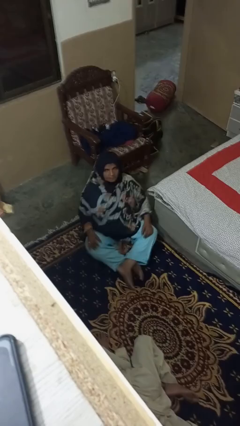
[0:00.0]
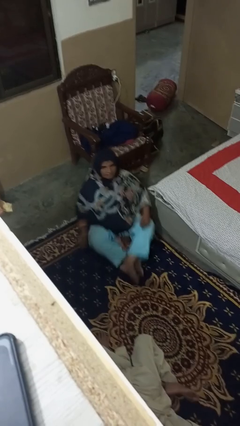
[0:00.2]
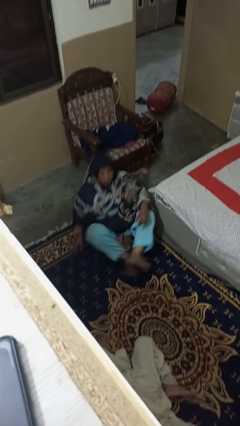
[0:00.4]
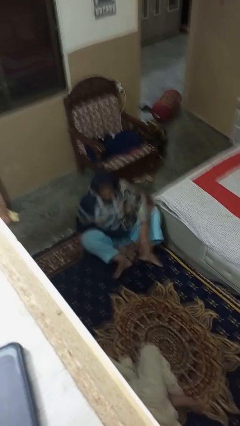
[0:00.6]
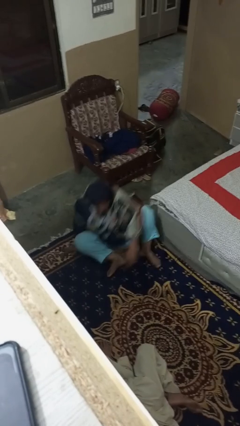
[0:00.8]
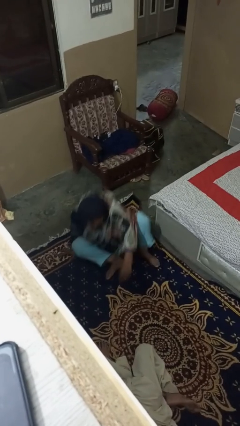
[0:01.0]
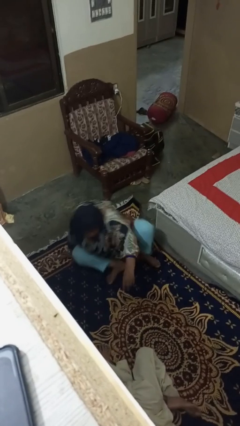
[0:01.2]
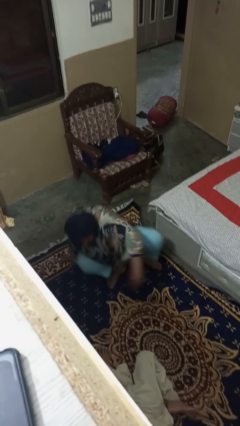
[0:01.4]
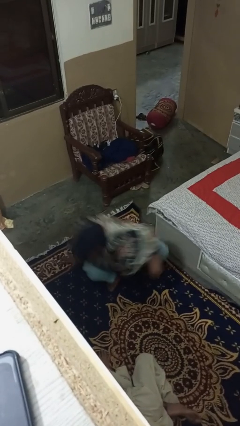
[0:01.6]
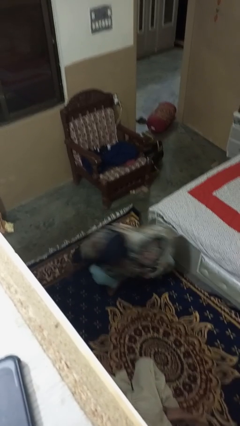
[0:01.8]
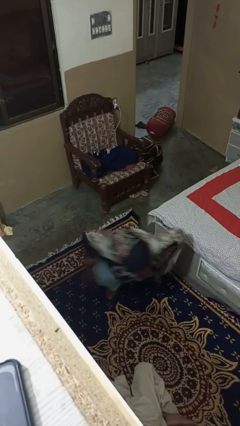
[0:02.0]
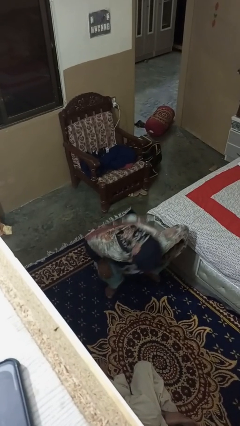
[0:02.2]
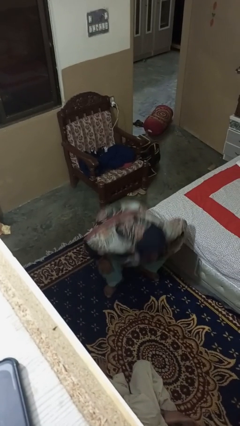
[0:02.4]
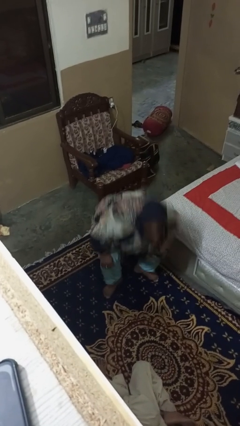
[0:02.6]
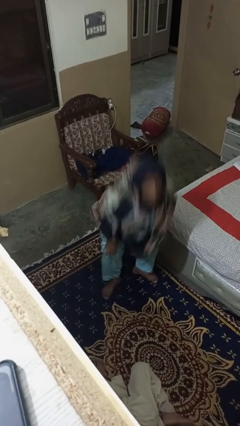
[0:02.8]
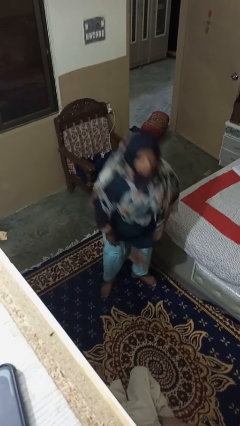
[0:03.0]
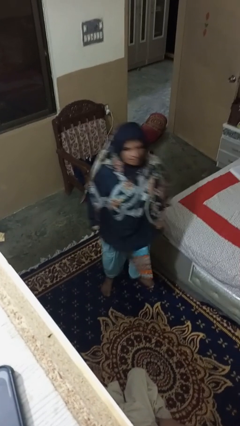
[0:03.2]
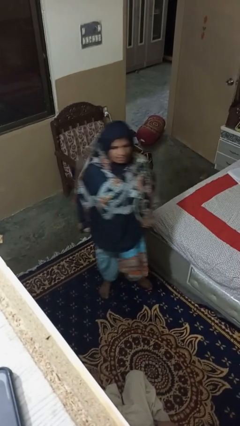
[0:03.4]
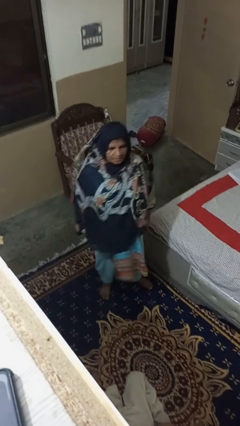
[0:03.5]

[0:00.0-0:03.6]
person stands up from floor

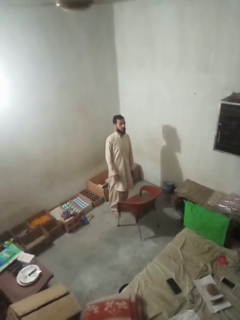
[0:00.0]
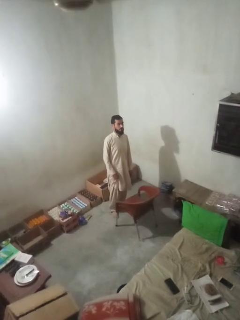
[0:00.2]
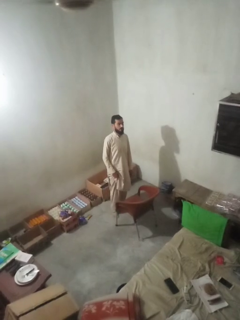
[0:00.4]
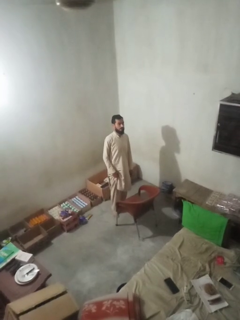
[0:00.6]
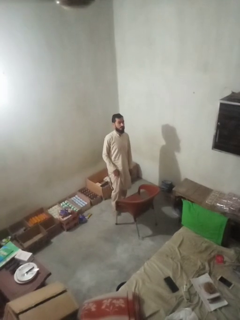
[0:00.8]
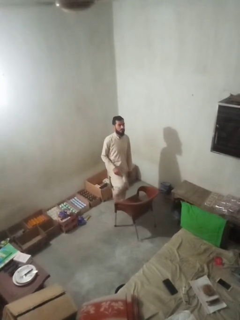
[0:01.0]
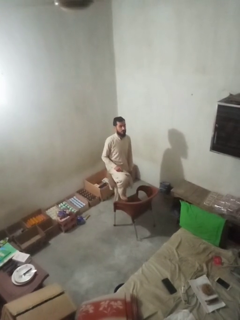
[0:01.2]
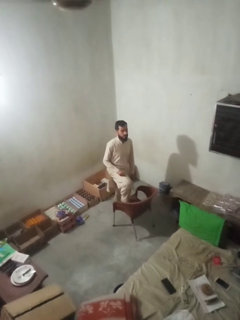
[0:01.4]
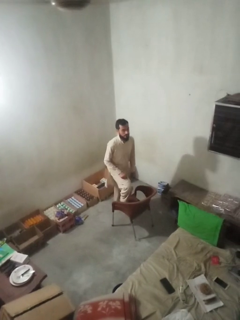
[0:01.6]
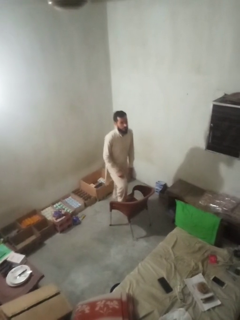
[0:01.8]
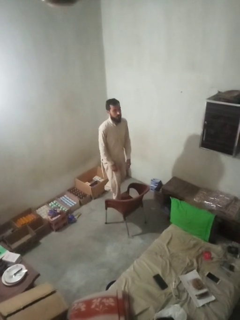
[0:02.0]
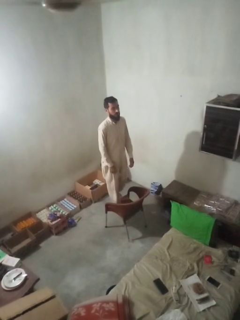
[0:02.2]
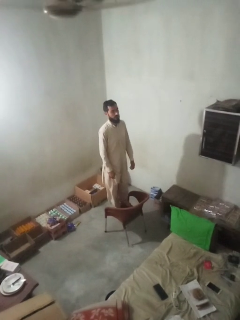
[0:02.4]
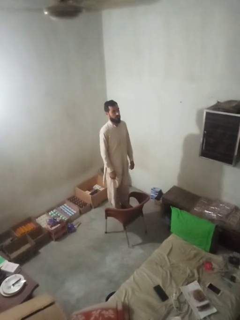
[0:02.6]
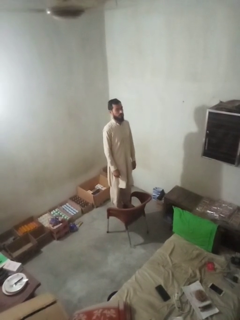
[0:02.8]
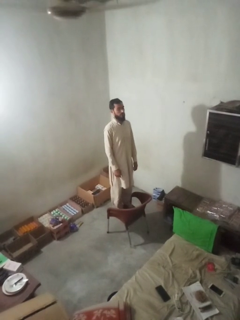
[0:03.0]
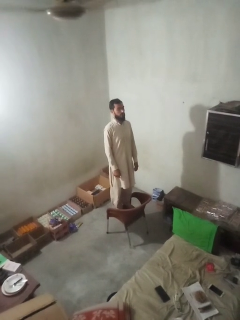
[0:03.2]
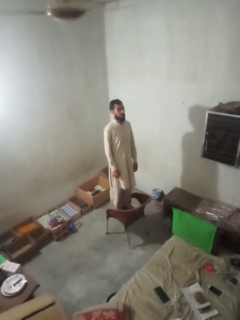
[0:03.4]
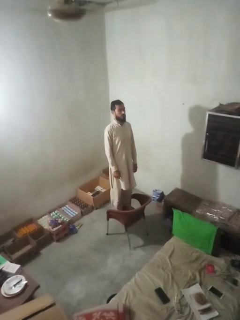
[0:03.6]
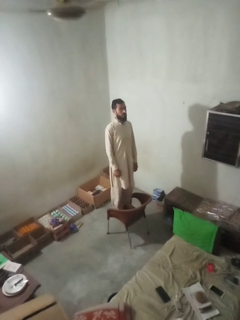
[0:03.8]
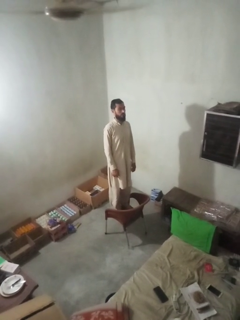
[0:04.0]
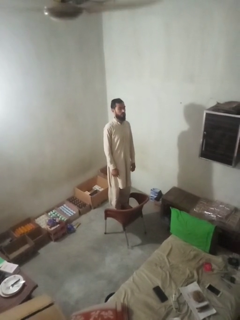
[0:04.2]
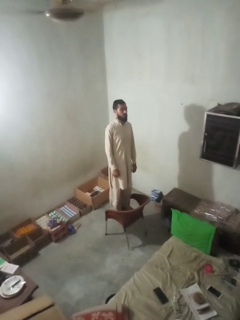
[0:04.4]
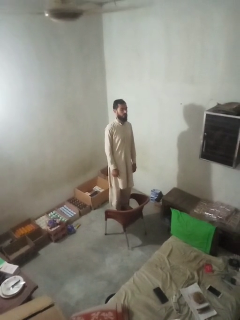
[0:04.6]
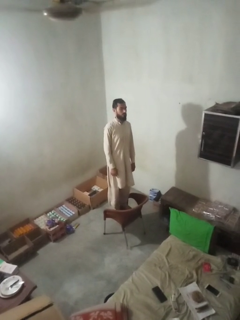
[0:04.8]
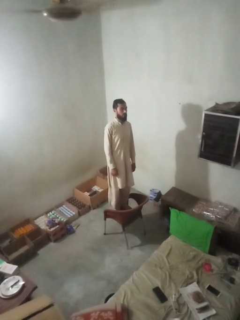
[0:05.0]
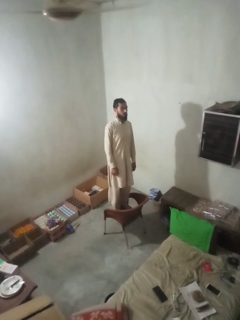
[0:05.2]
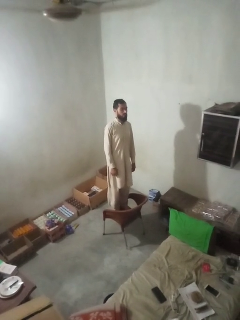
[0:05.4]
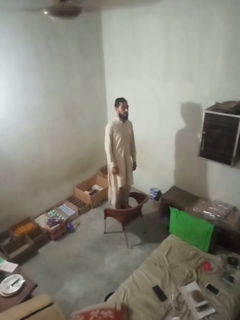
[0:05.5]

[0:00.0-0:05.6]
person climbs on chair

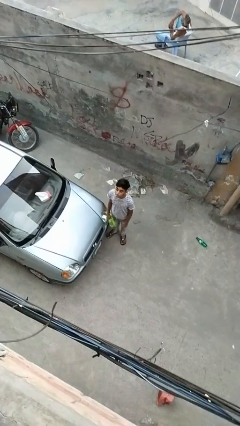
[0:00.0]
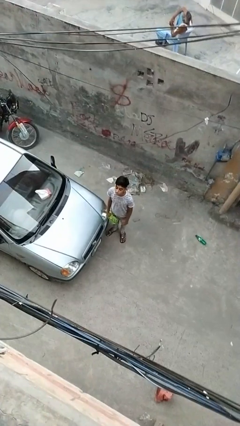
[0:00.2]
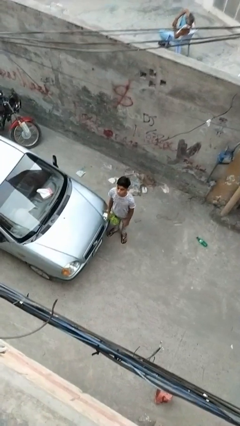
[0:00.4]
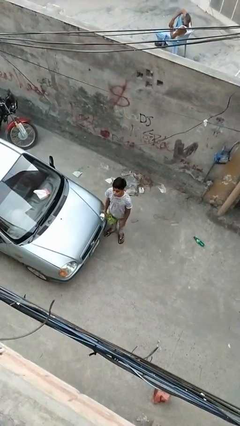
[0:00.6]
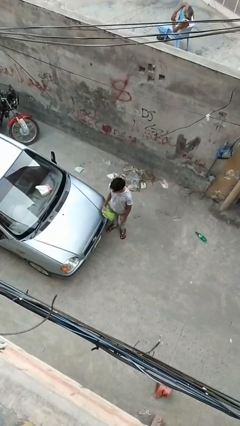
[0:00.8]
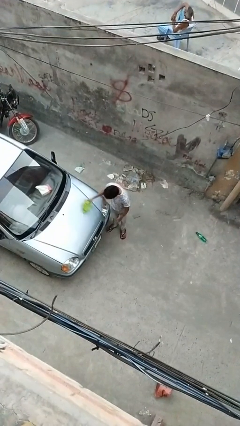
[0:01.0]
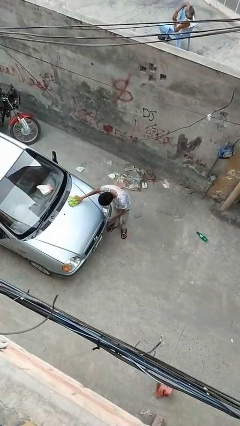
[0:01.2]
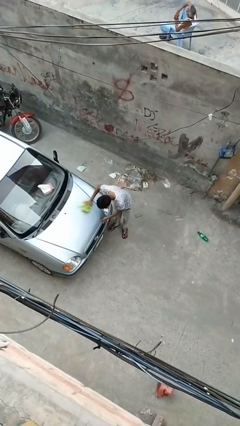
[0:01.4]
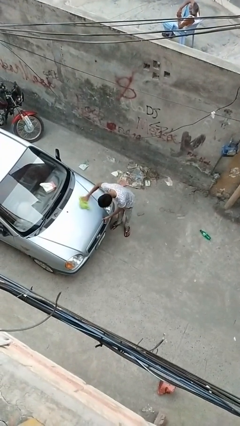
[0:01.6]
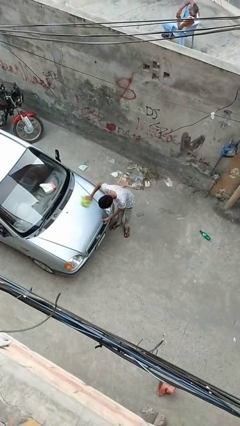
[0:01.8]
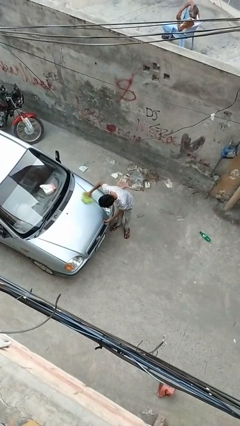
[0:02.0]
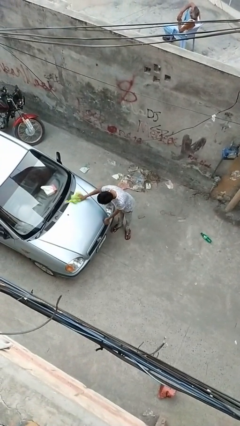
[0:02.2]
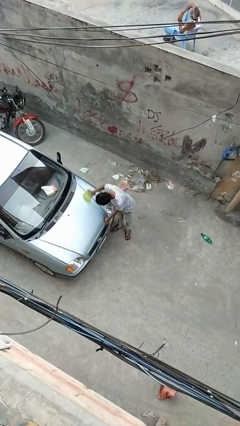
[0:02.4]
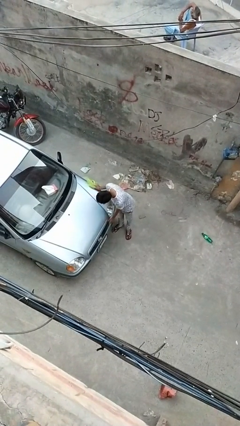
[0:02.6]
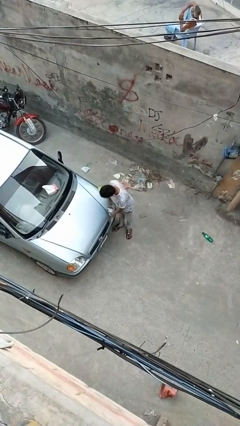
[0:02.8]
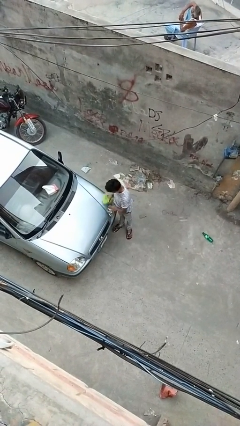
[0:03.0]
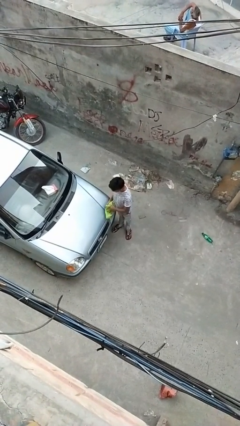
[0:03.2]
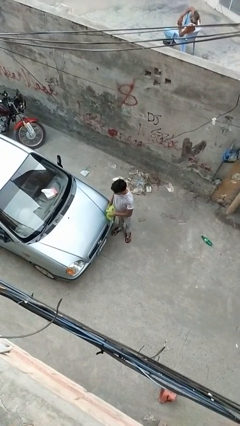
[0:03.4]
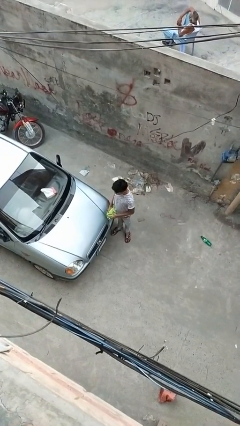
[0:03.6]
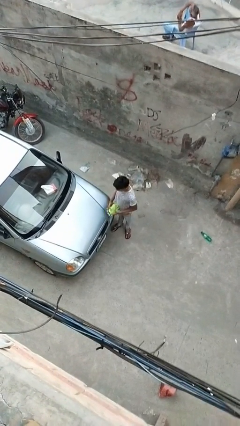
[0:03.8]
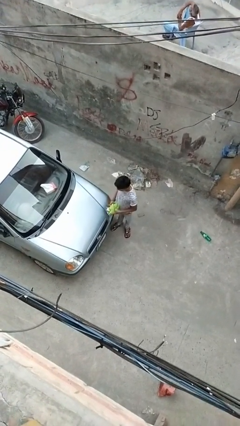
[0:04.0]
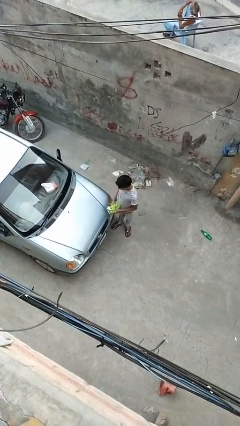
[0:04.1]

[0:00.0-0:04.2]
person polishes car with rag

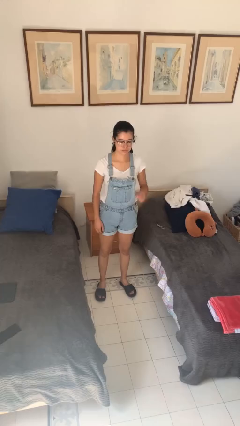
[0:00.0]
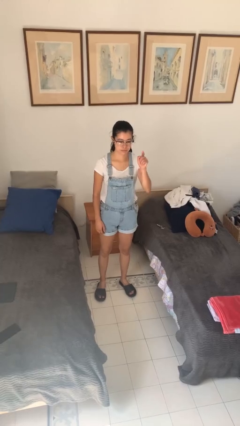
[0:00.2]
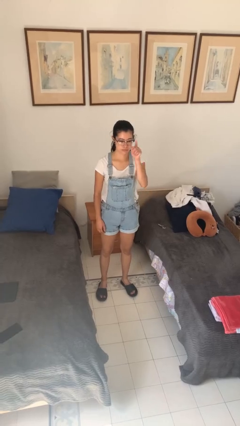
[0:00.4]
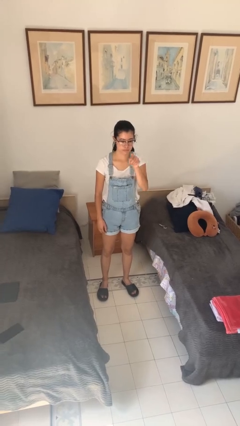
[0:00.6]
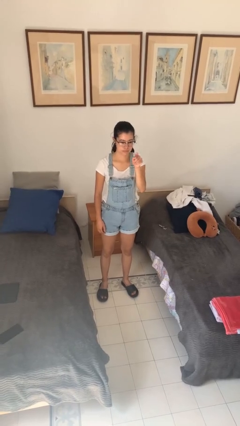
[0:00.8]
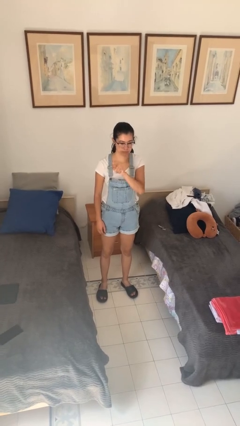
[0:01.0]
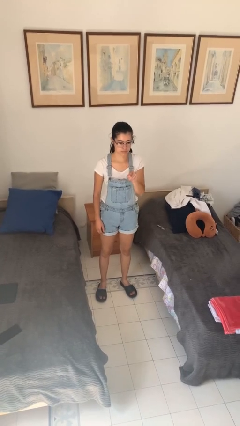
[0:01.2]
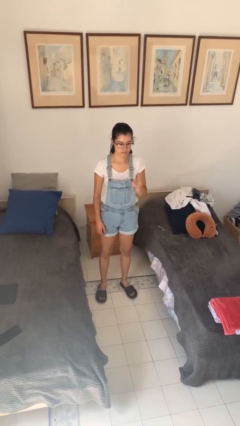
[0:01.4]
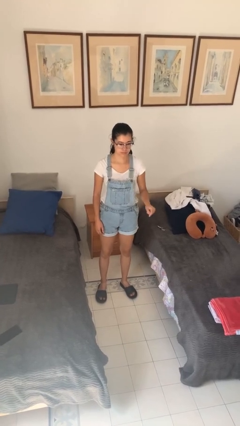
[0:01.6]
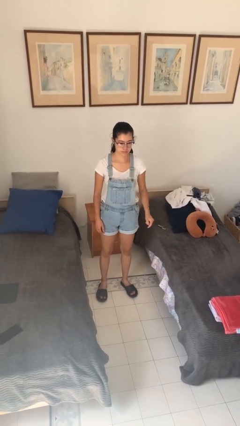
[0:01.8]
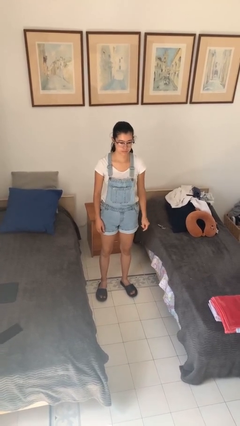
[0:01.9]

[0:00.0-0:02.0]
person gestures number three

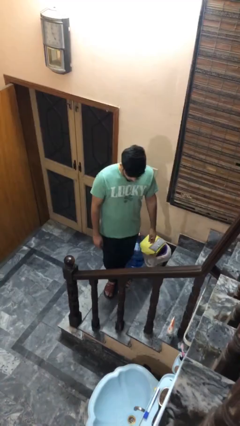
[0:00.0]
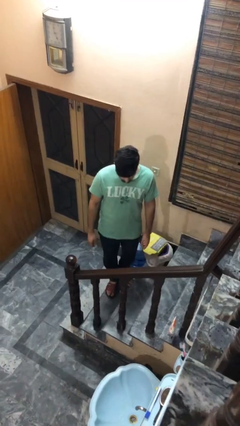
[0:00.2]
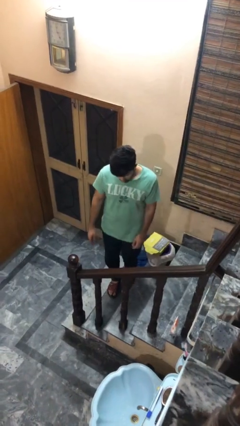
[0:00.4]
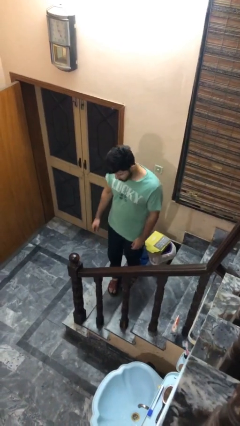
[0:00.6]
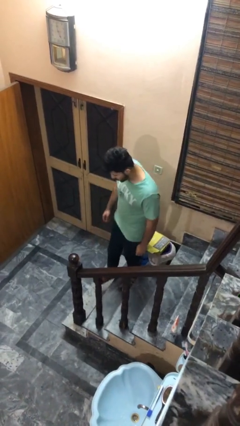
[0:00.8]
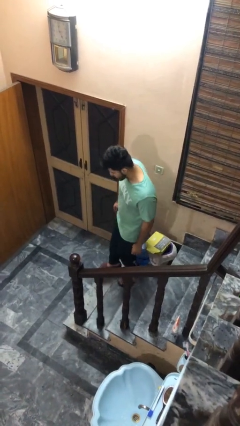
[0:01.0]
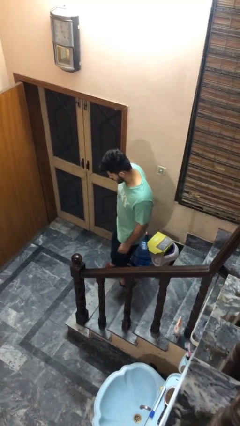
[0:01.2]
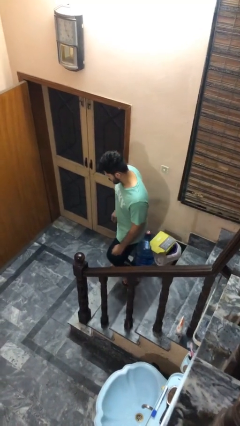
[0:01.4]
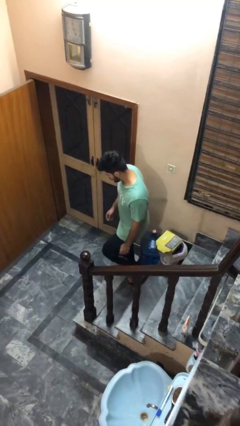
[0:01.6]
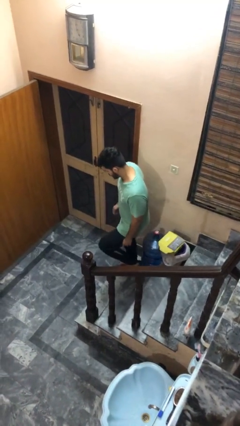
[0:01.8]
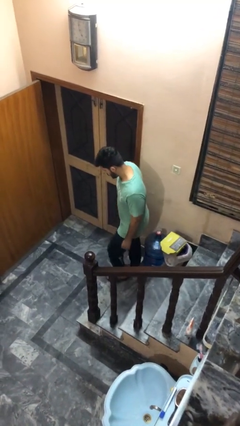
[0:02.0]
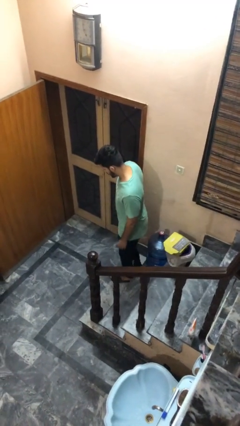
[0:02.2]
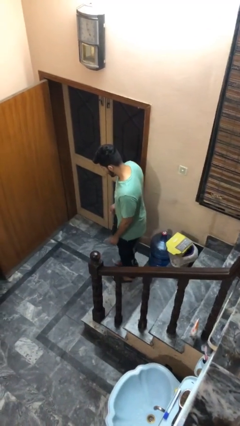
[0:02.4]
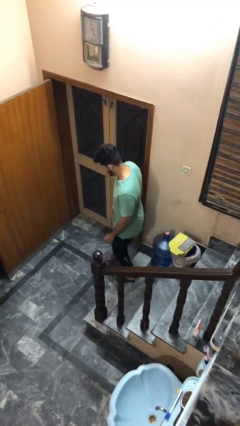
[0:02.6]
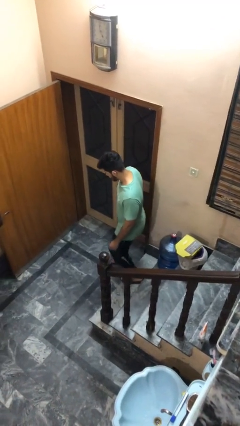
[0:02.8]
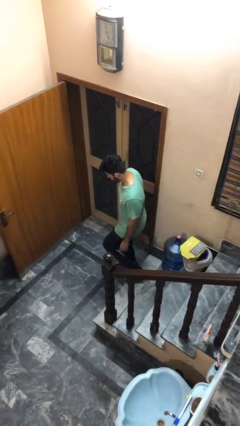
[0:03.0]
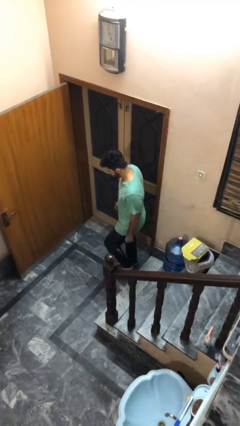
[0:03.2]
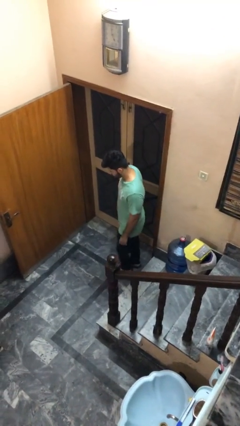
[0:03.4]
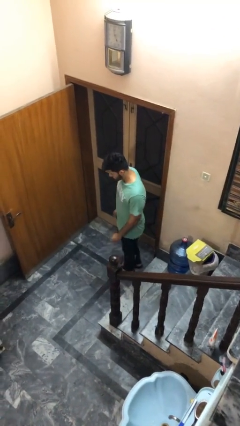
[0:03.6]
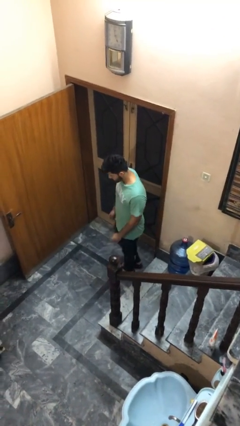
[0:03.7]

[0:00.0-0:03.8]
person climbs down stairs
